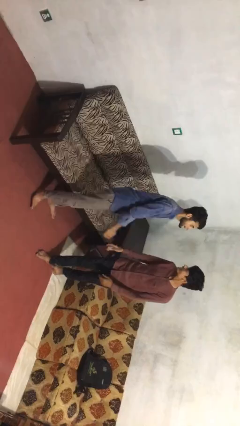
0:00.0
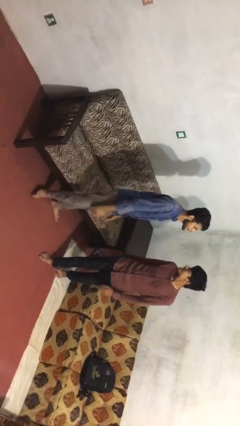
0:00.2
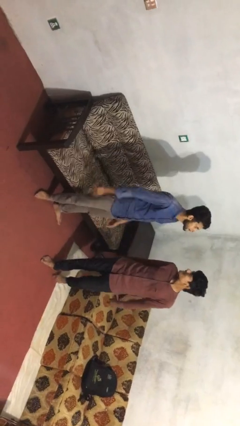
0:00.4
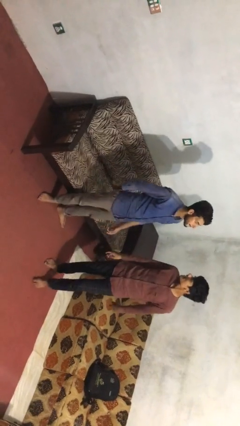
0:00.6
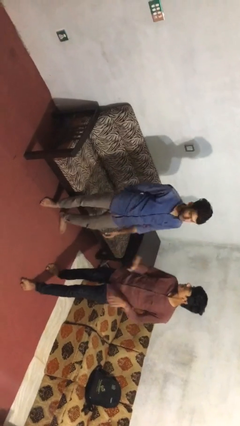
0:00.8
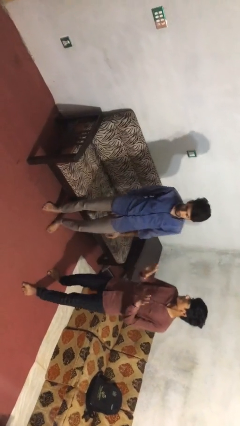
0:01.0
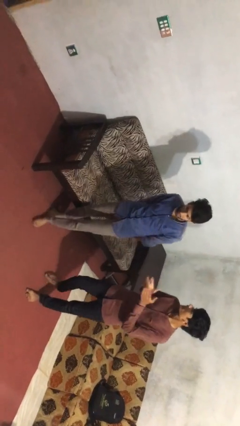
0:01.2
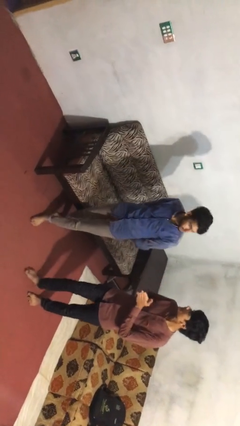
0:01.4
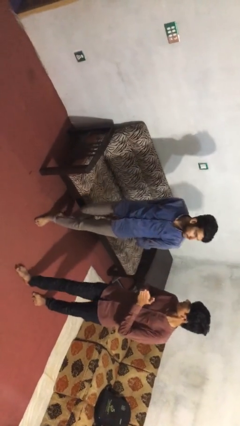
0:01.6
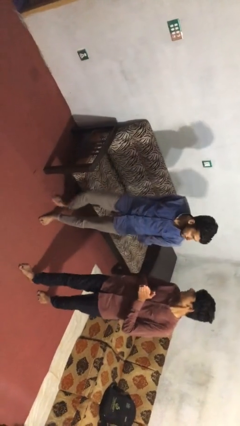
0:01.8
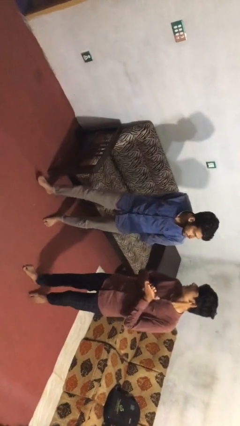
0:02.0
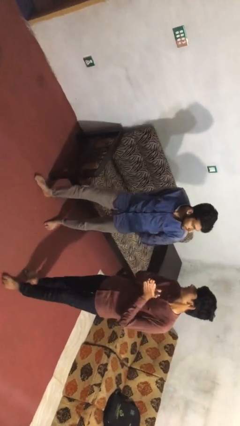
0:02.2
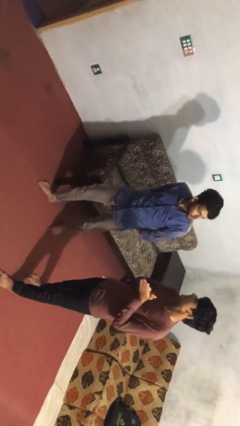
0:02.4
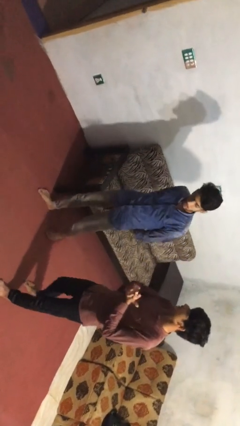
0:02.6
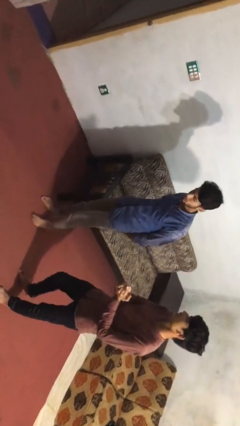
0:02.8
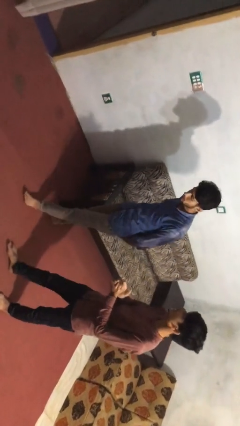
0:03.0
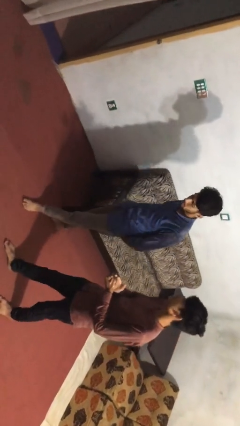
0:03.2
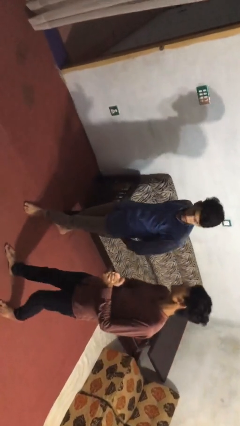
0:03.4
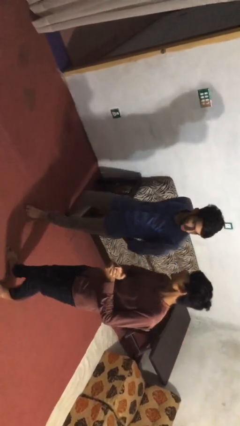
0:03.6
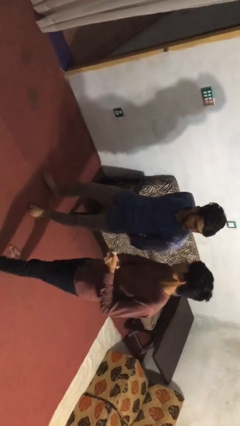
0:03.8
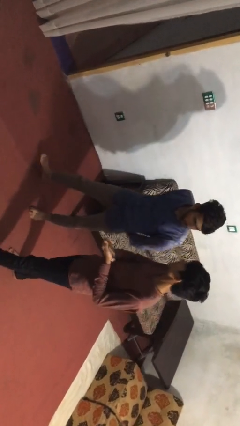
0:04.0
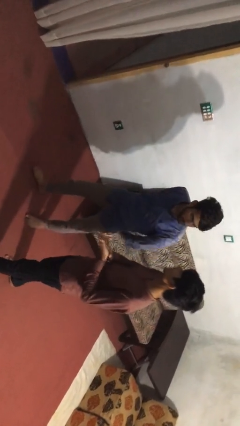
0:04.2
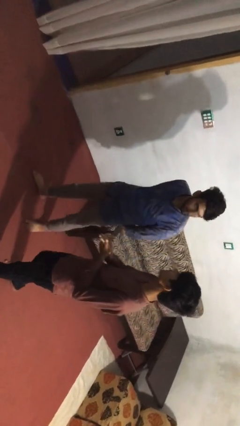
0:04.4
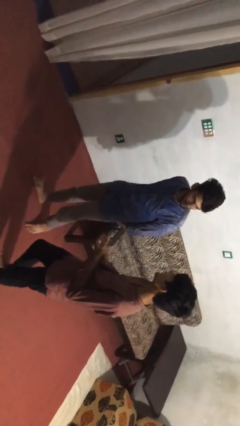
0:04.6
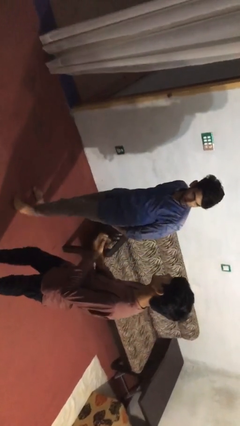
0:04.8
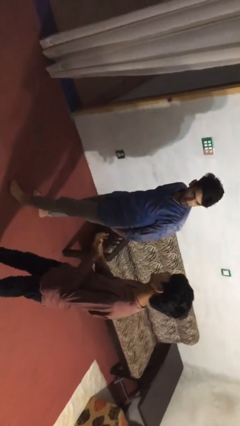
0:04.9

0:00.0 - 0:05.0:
person talks to person

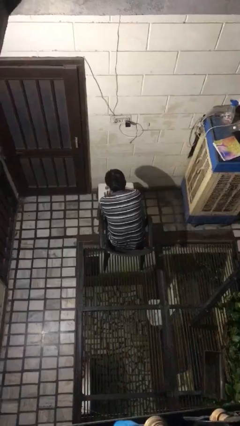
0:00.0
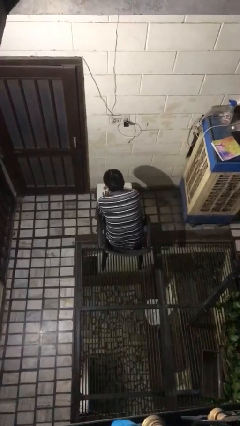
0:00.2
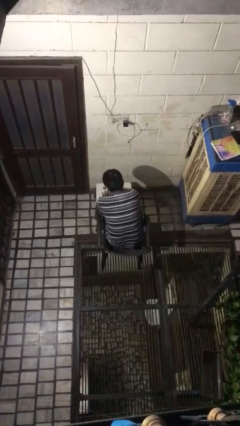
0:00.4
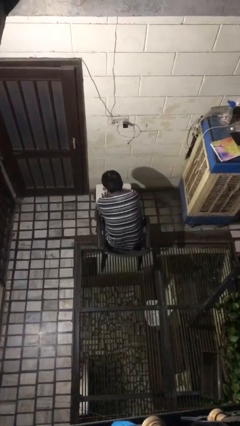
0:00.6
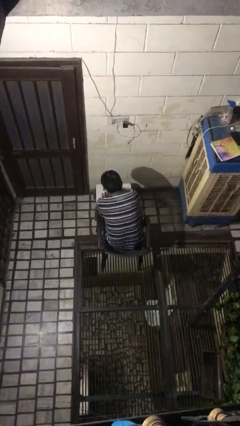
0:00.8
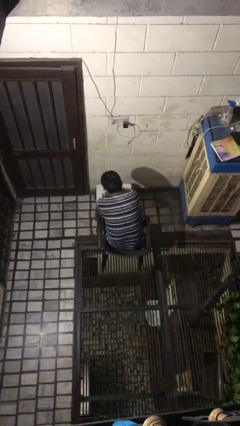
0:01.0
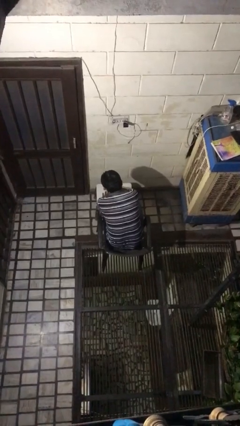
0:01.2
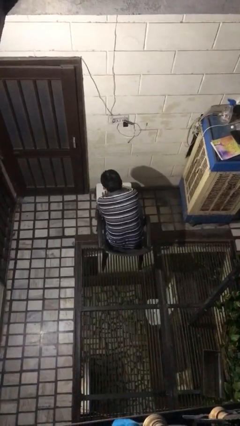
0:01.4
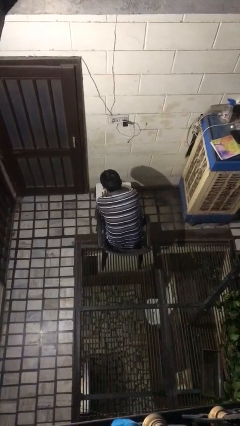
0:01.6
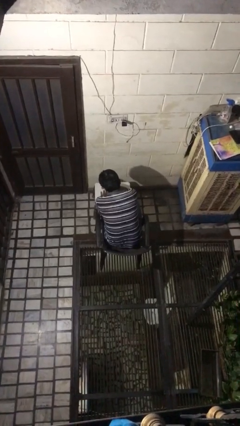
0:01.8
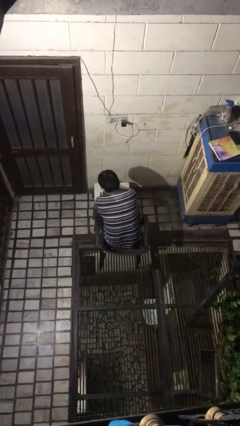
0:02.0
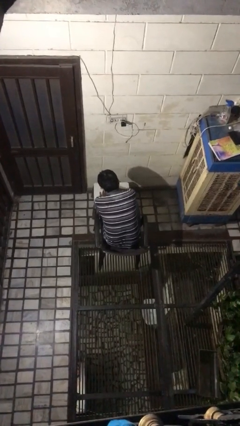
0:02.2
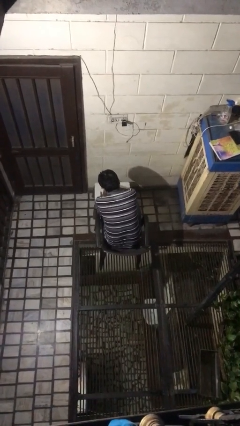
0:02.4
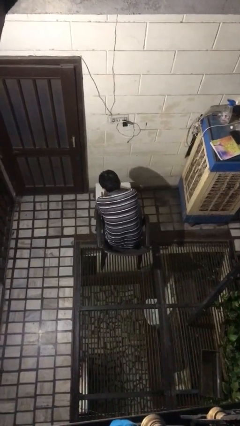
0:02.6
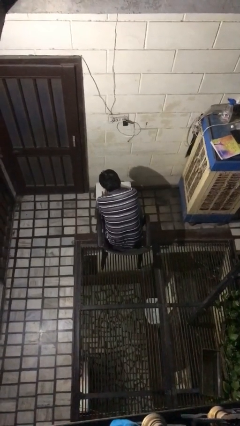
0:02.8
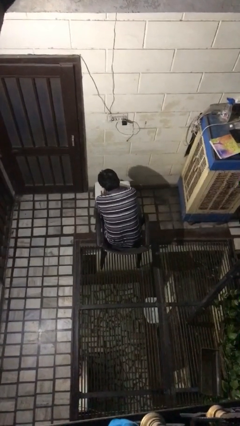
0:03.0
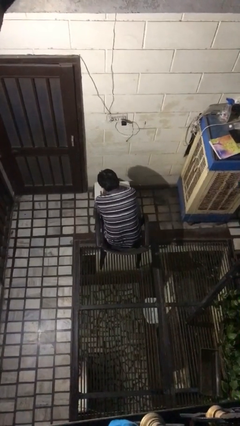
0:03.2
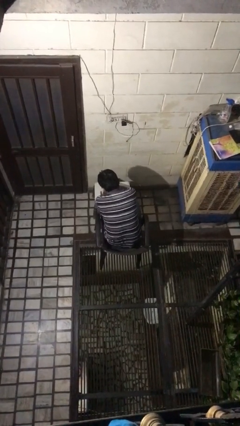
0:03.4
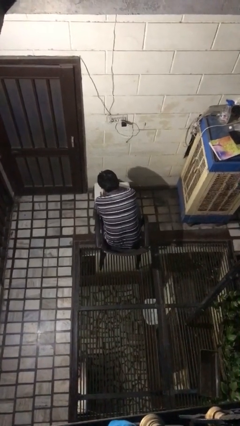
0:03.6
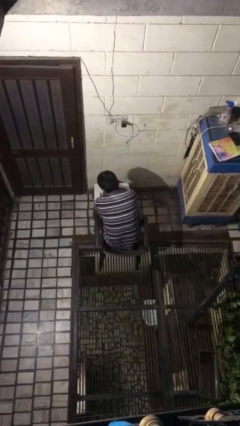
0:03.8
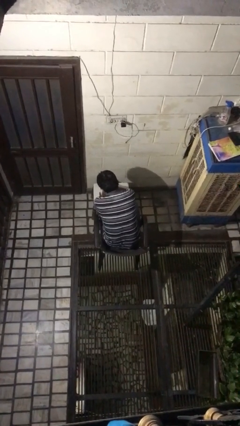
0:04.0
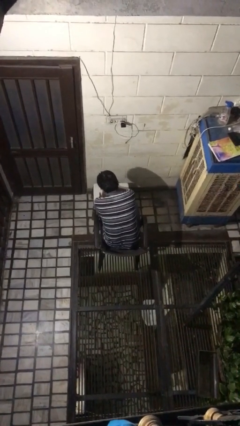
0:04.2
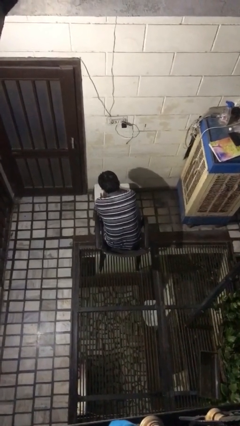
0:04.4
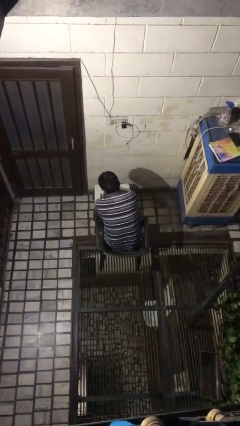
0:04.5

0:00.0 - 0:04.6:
person paints fingernails

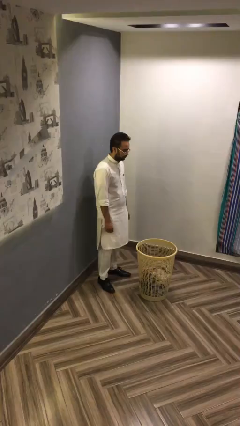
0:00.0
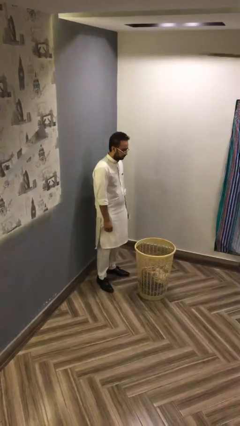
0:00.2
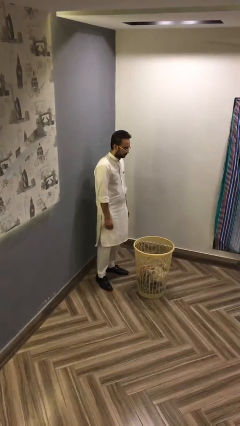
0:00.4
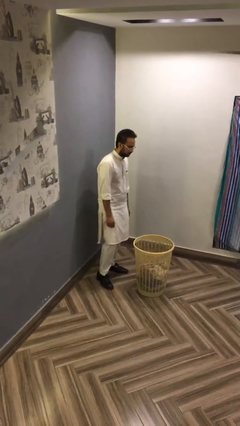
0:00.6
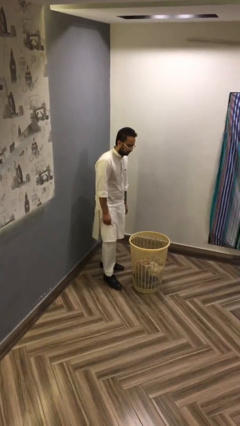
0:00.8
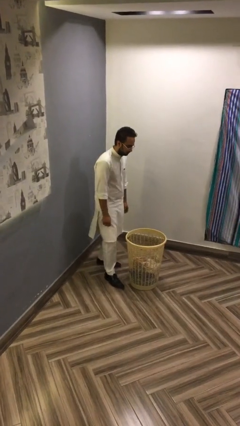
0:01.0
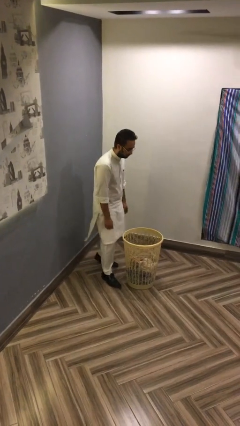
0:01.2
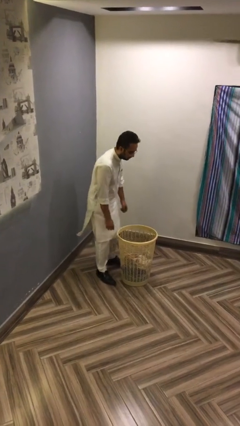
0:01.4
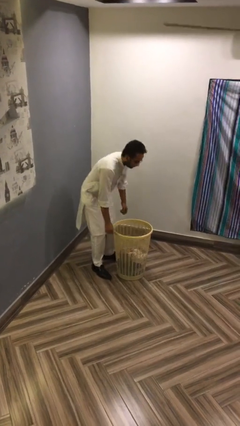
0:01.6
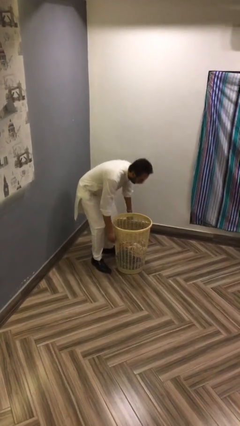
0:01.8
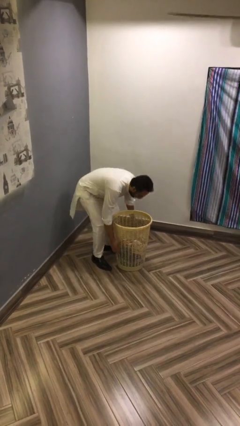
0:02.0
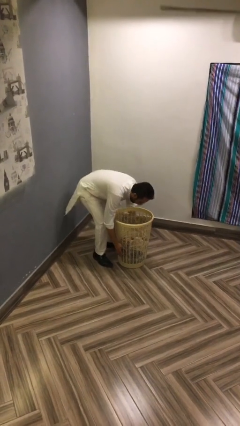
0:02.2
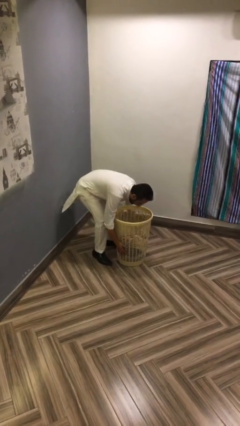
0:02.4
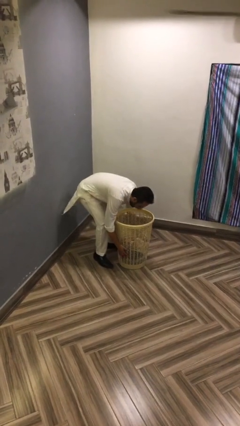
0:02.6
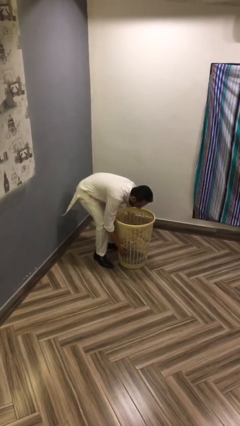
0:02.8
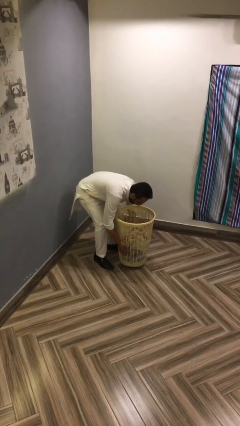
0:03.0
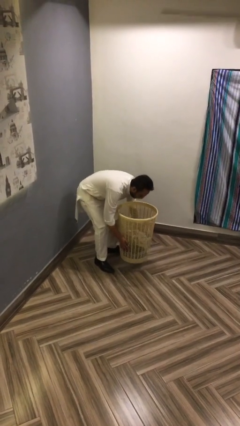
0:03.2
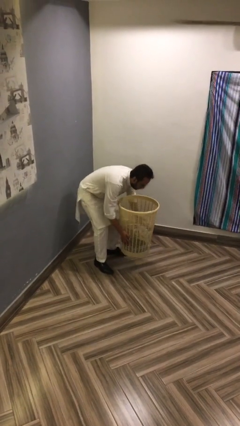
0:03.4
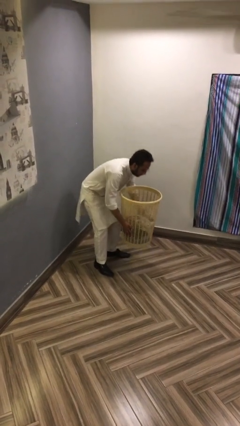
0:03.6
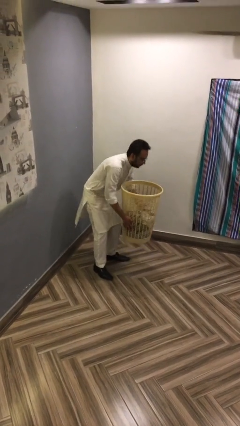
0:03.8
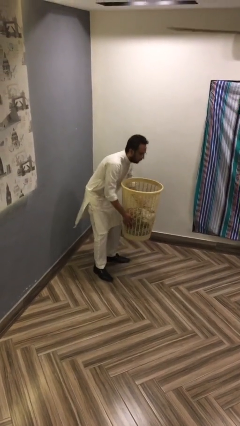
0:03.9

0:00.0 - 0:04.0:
person picks up object from floor

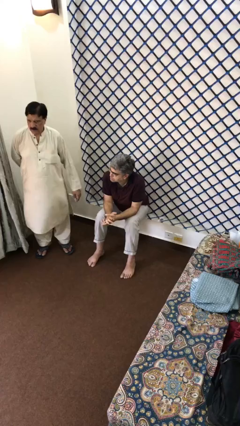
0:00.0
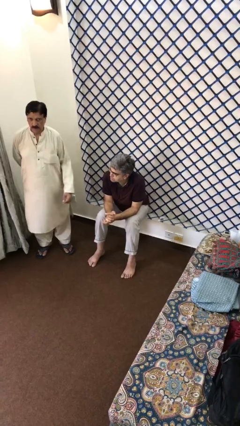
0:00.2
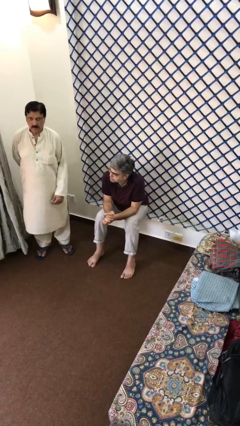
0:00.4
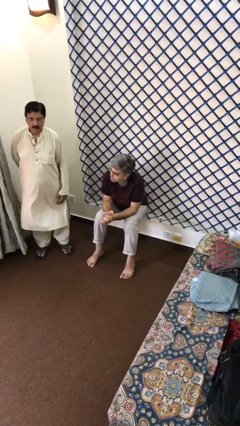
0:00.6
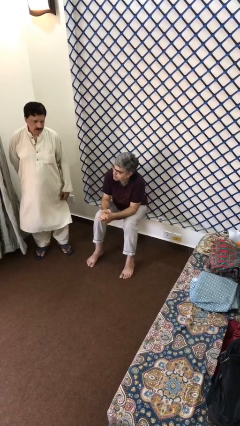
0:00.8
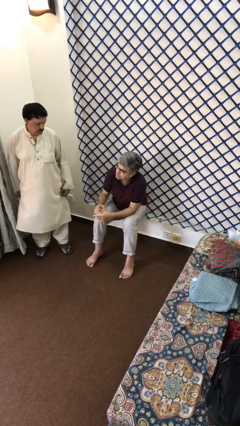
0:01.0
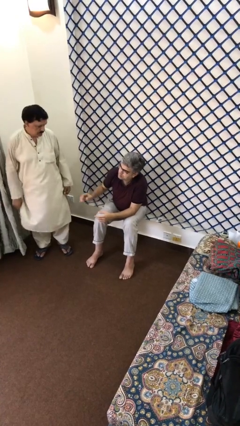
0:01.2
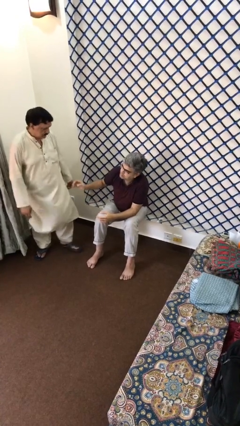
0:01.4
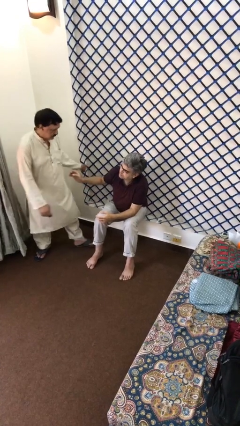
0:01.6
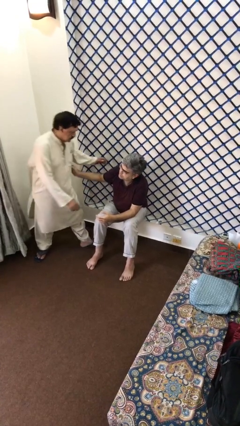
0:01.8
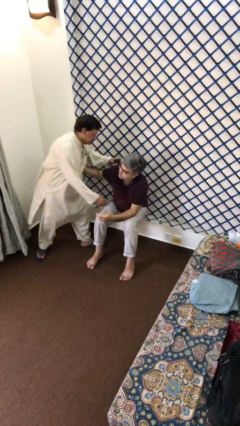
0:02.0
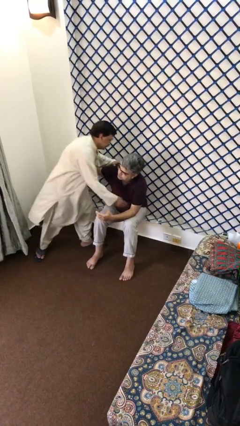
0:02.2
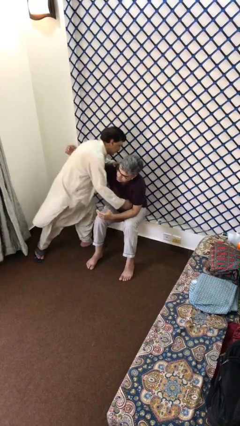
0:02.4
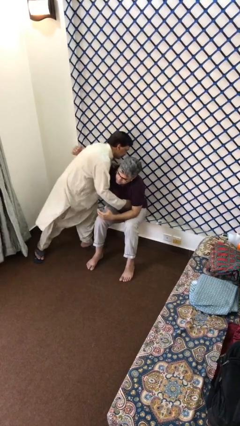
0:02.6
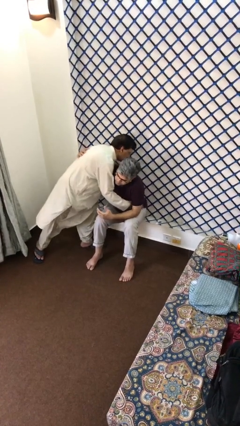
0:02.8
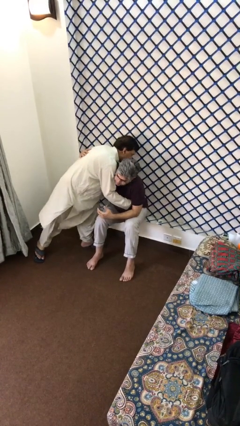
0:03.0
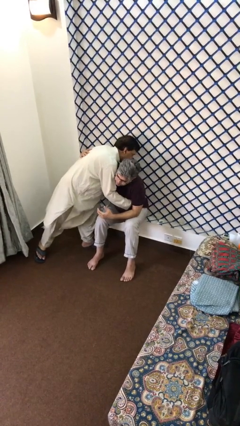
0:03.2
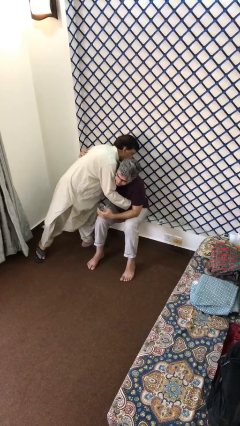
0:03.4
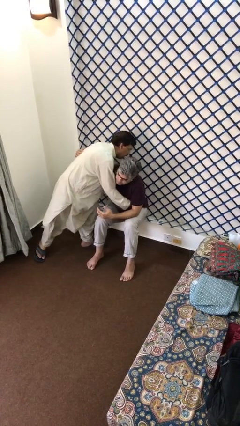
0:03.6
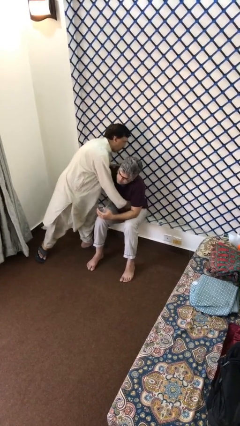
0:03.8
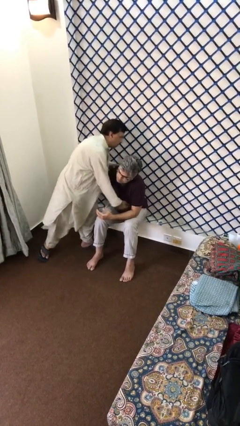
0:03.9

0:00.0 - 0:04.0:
person embraces person

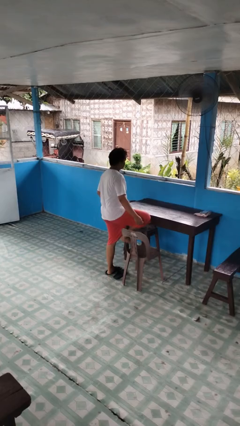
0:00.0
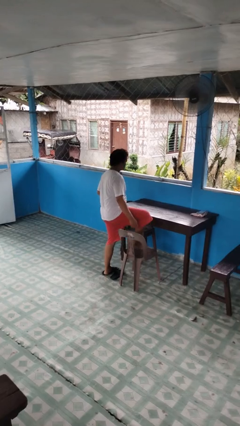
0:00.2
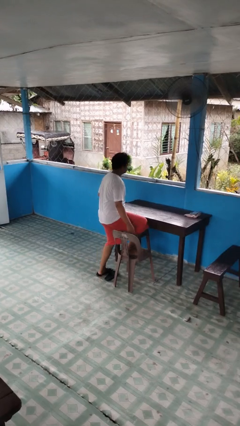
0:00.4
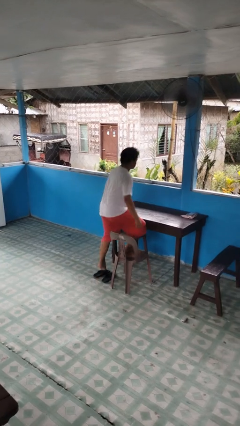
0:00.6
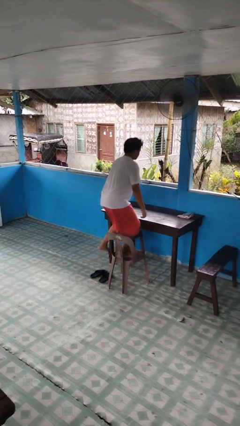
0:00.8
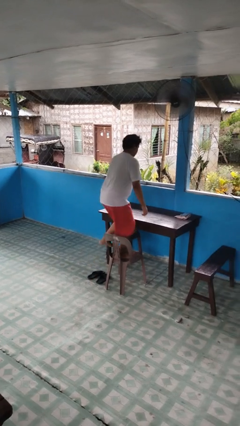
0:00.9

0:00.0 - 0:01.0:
person climbs on chair
